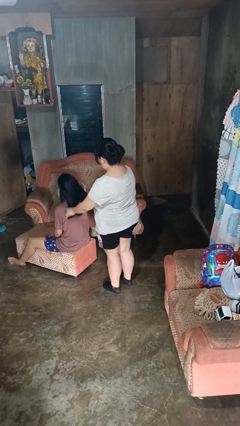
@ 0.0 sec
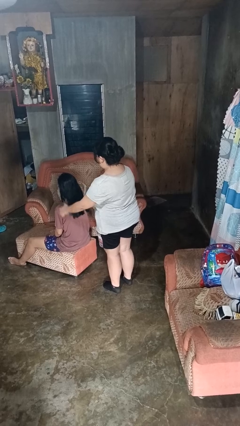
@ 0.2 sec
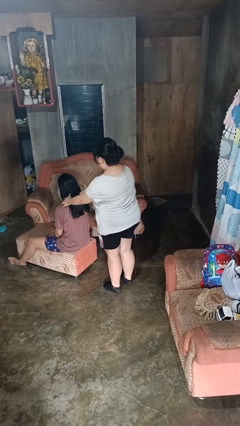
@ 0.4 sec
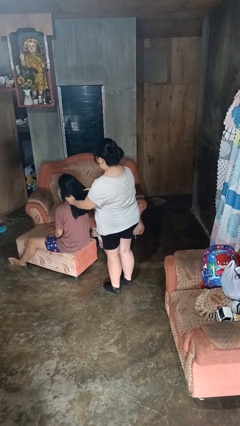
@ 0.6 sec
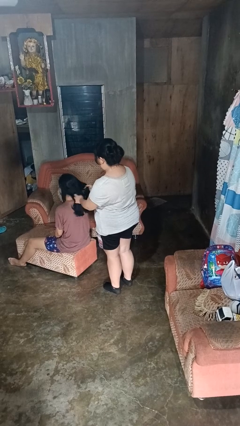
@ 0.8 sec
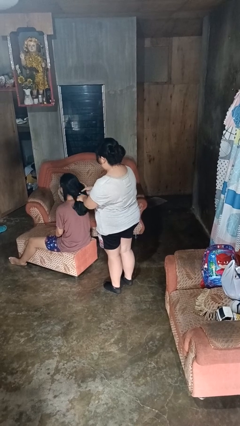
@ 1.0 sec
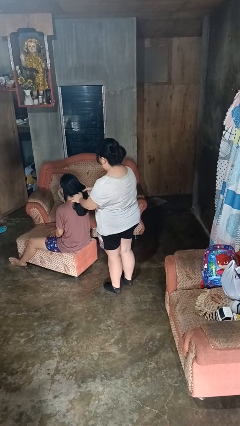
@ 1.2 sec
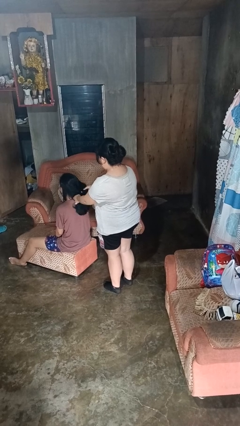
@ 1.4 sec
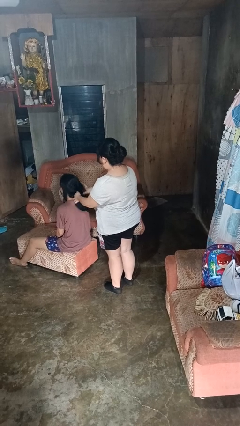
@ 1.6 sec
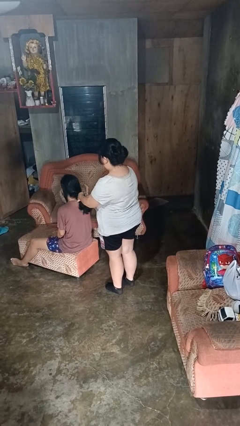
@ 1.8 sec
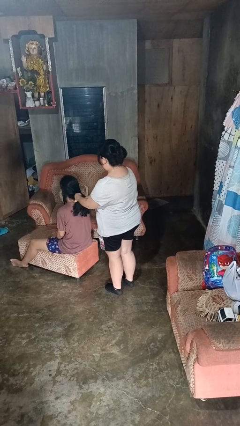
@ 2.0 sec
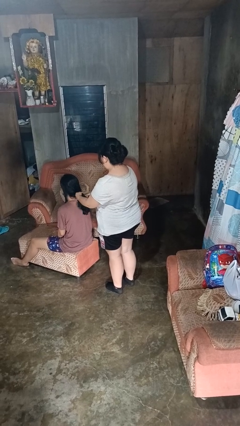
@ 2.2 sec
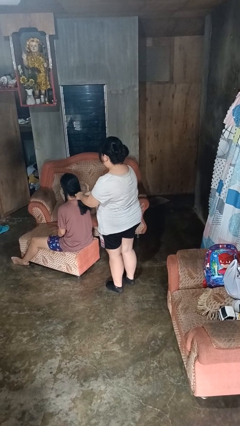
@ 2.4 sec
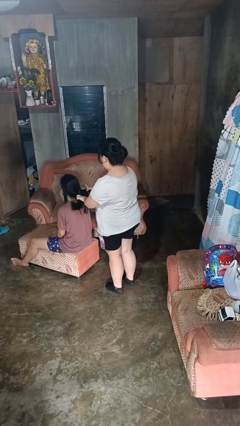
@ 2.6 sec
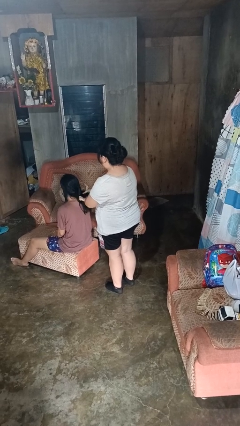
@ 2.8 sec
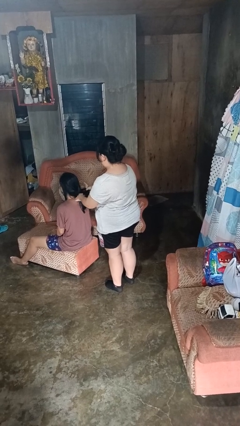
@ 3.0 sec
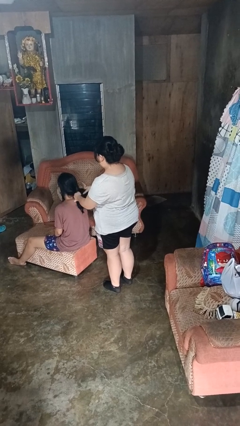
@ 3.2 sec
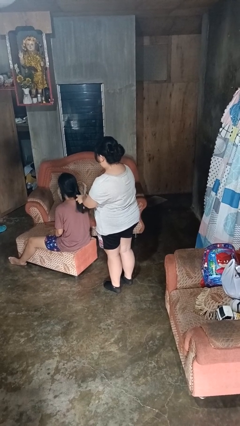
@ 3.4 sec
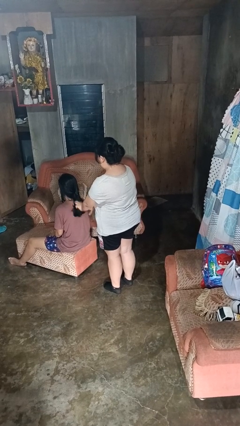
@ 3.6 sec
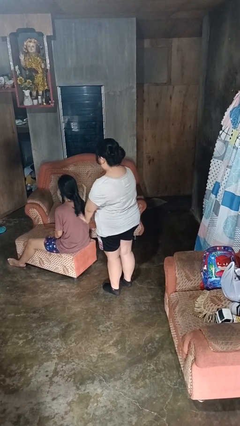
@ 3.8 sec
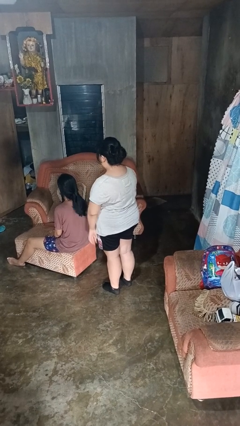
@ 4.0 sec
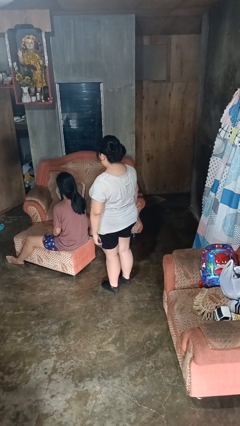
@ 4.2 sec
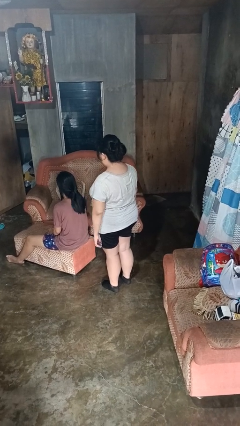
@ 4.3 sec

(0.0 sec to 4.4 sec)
person braids hair of person

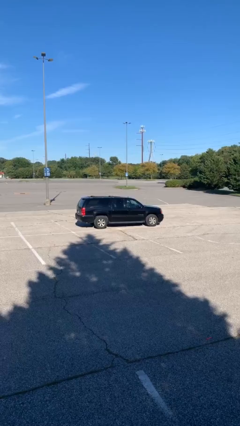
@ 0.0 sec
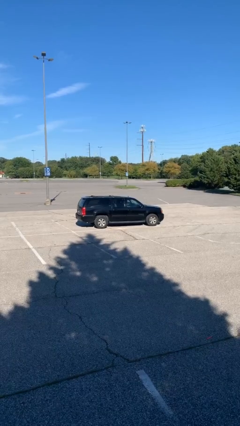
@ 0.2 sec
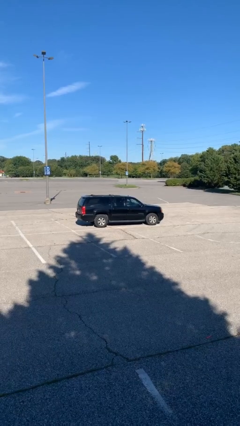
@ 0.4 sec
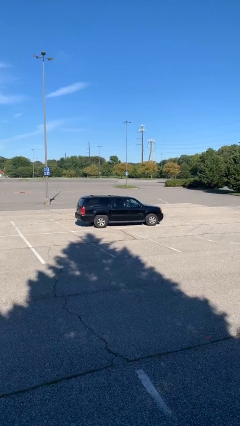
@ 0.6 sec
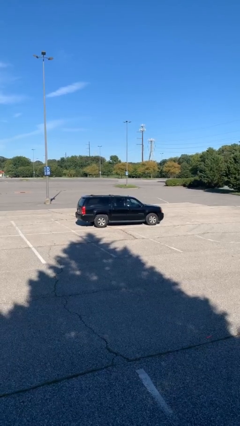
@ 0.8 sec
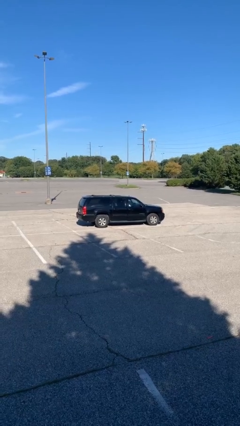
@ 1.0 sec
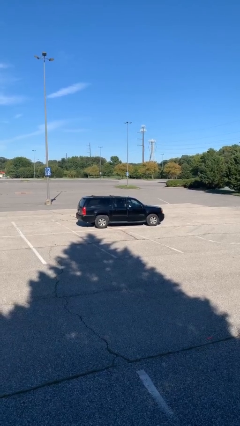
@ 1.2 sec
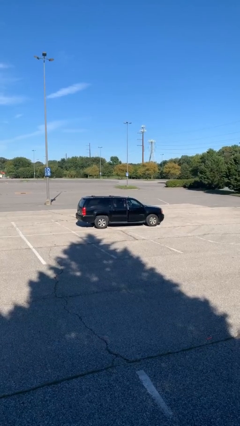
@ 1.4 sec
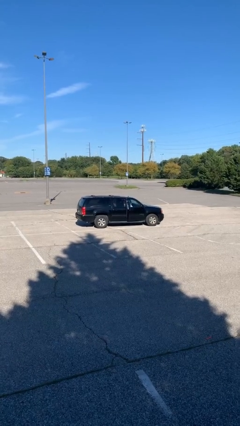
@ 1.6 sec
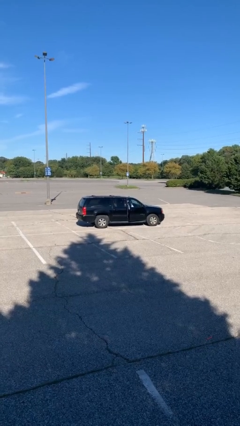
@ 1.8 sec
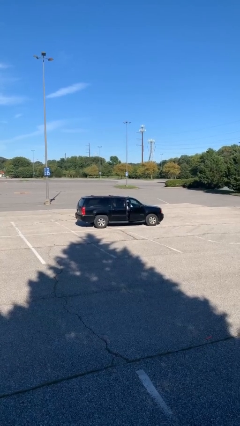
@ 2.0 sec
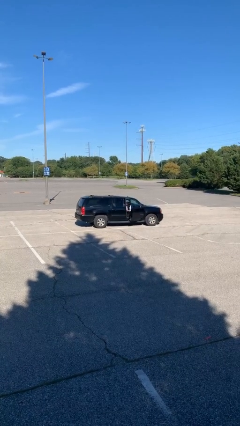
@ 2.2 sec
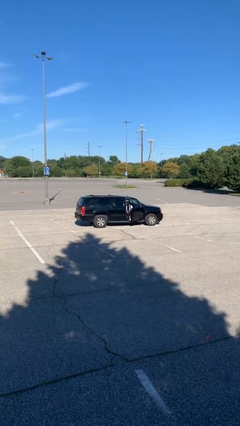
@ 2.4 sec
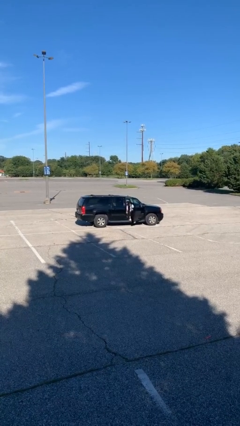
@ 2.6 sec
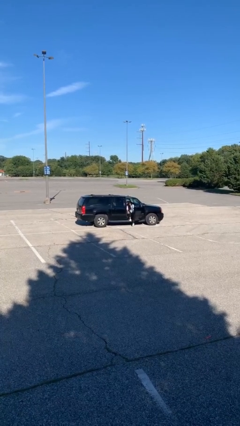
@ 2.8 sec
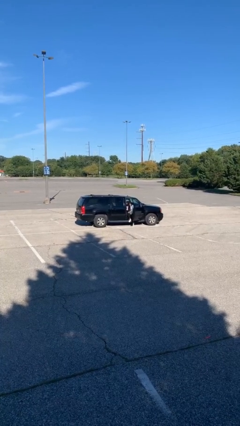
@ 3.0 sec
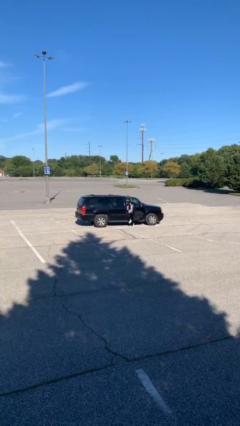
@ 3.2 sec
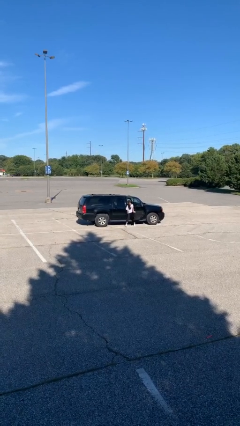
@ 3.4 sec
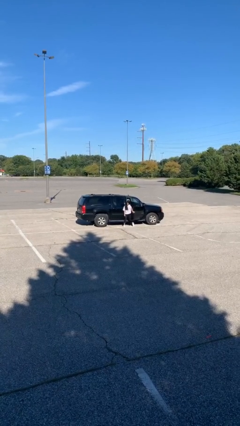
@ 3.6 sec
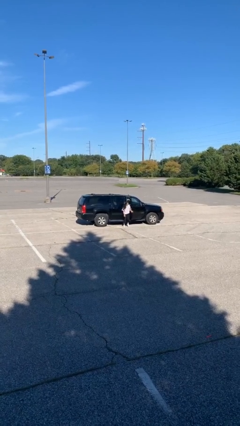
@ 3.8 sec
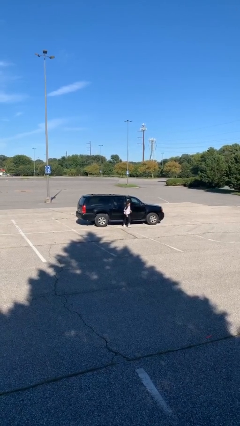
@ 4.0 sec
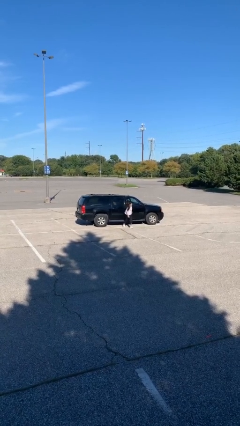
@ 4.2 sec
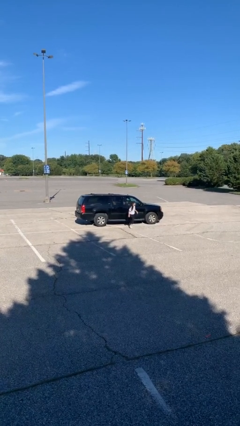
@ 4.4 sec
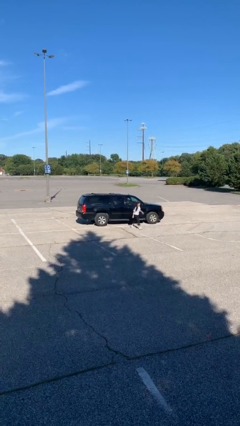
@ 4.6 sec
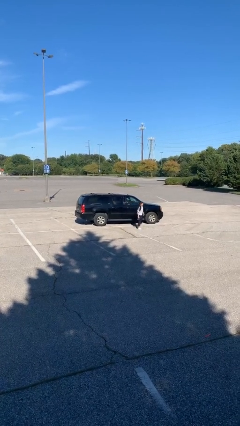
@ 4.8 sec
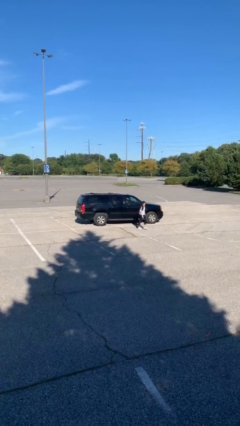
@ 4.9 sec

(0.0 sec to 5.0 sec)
car drops off person

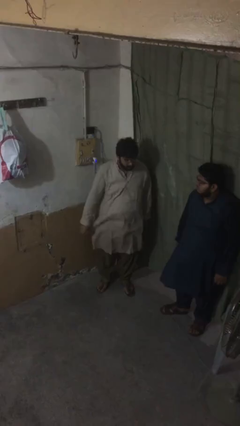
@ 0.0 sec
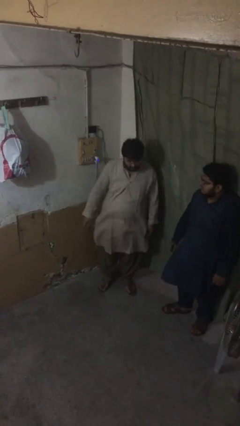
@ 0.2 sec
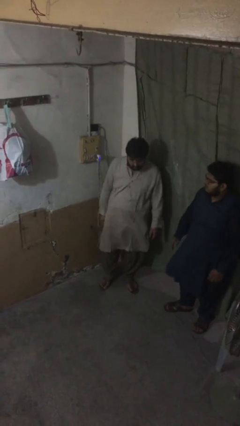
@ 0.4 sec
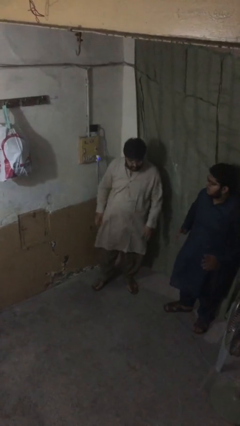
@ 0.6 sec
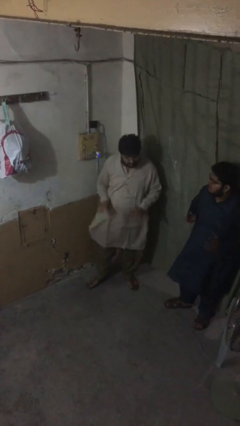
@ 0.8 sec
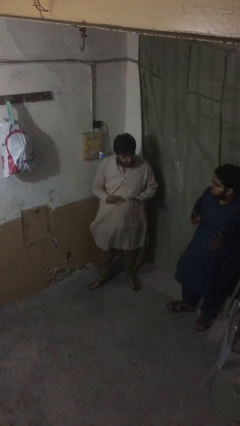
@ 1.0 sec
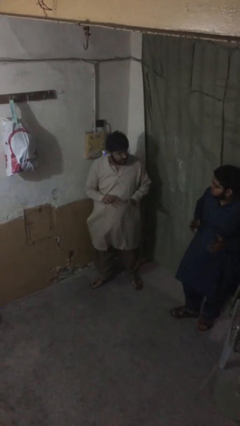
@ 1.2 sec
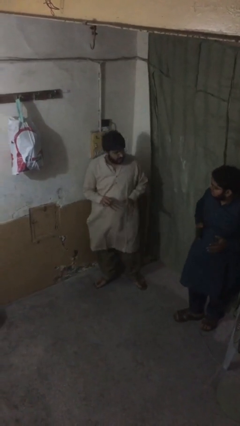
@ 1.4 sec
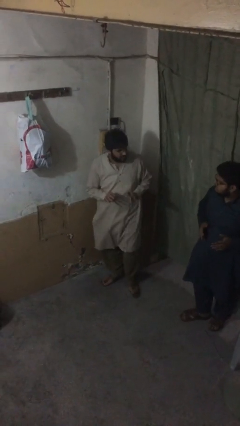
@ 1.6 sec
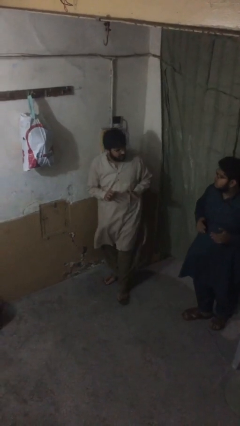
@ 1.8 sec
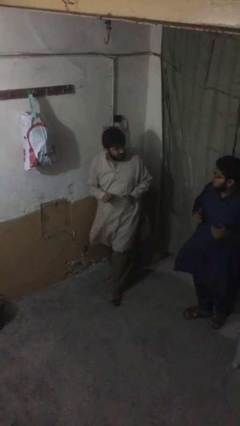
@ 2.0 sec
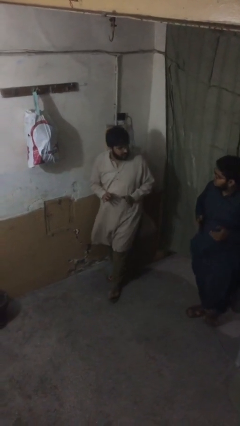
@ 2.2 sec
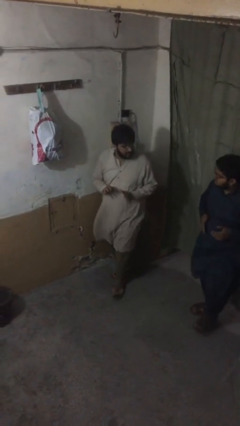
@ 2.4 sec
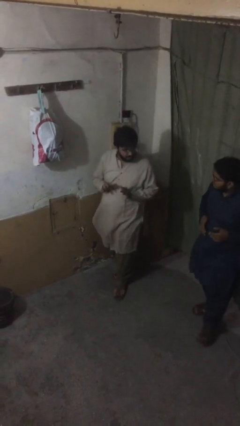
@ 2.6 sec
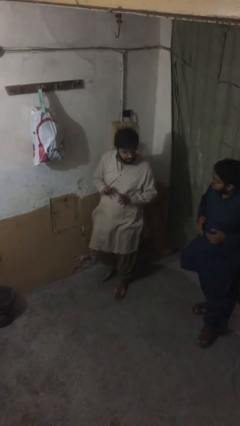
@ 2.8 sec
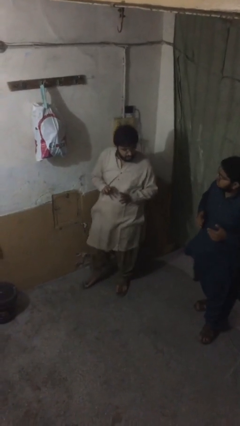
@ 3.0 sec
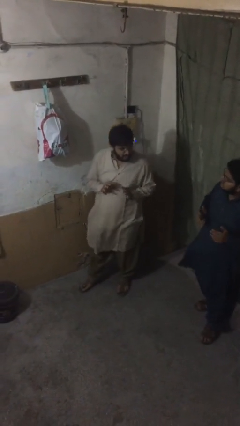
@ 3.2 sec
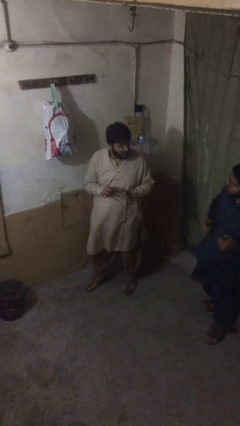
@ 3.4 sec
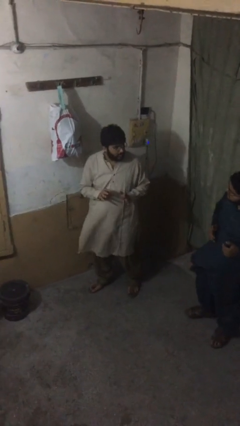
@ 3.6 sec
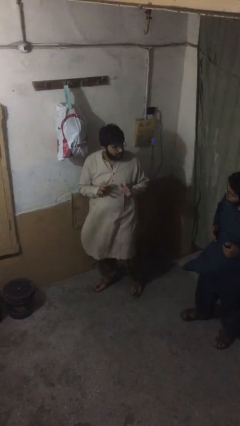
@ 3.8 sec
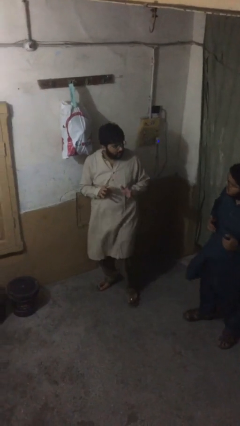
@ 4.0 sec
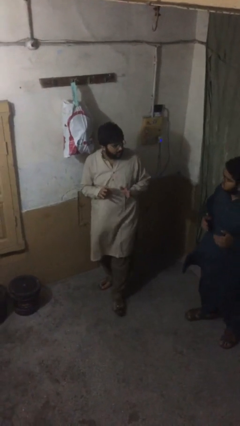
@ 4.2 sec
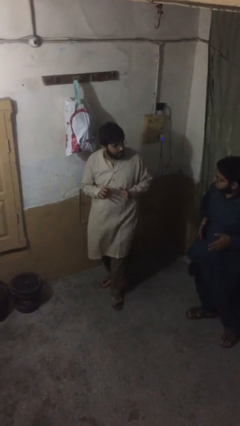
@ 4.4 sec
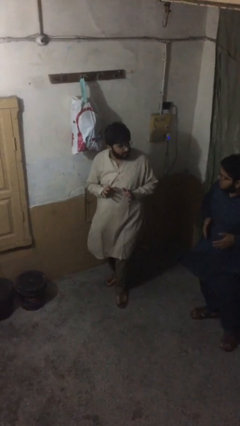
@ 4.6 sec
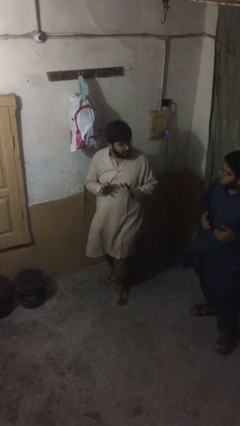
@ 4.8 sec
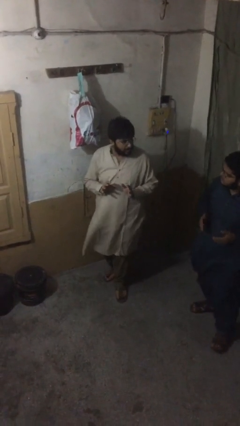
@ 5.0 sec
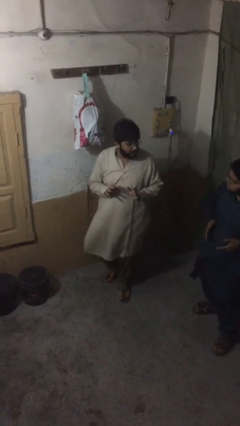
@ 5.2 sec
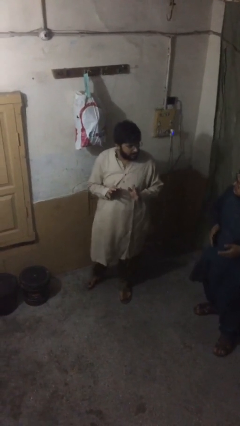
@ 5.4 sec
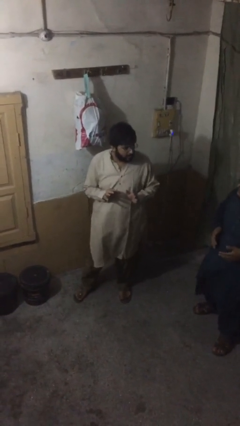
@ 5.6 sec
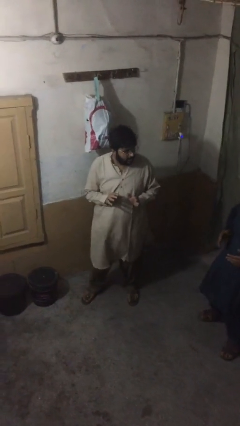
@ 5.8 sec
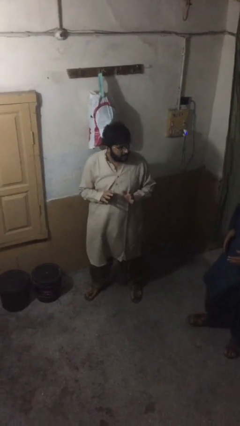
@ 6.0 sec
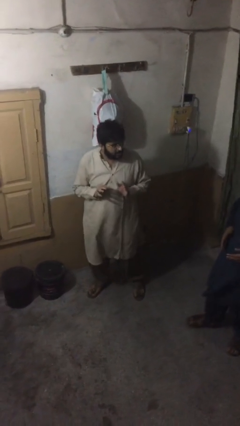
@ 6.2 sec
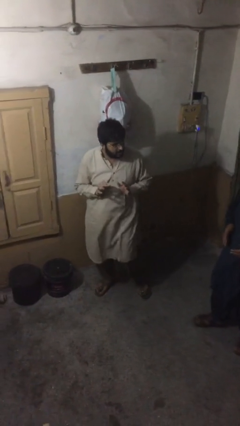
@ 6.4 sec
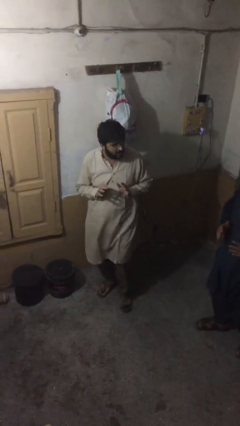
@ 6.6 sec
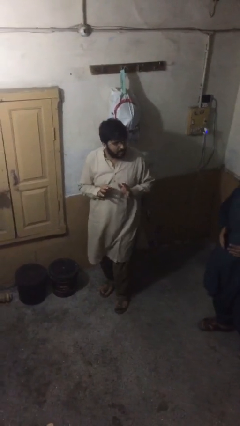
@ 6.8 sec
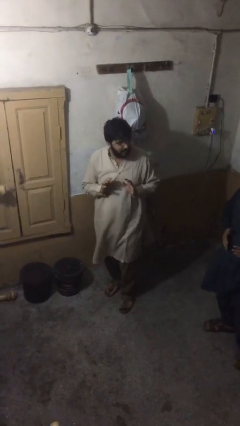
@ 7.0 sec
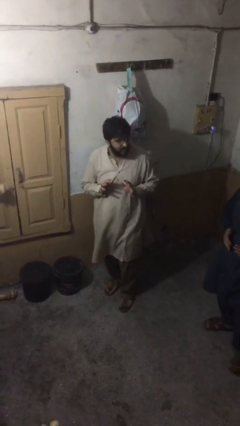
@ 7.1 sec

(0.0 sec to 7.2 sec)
person talks to person

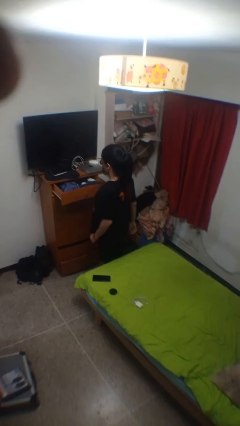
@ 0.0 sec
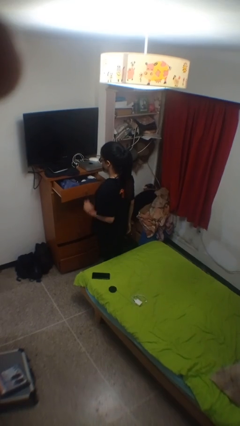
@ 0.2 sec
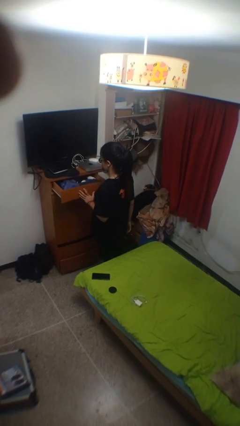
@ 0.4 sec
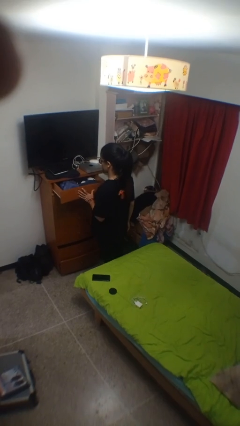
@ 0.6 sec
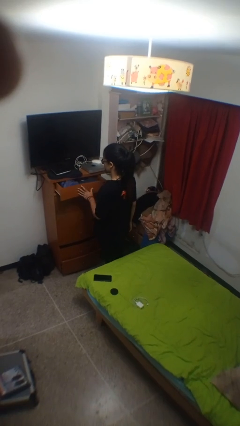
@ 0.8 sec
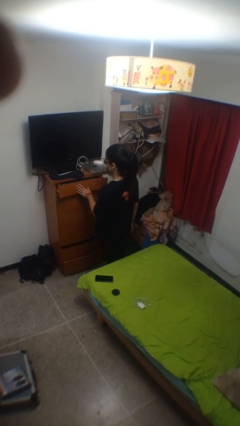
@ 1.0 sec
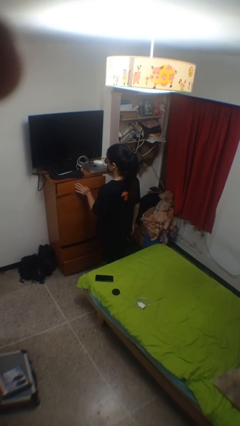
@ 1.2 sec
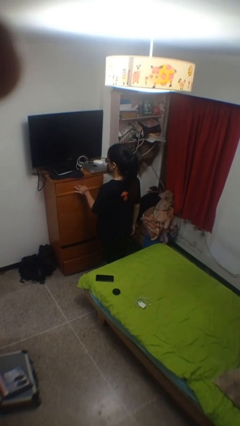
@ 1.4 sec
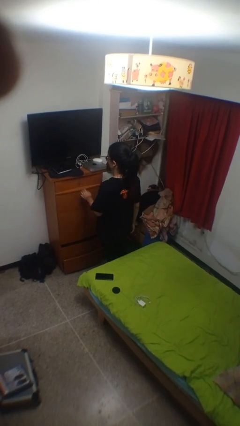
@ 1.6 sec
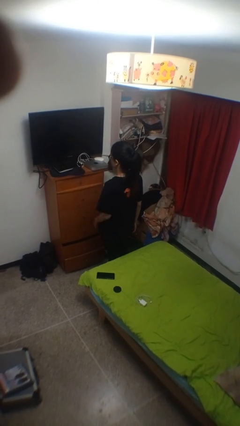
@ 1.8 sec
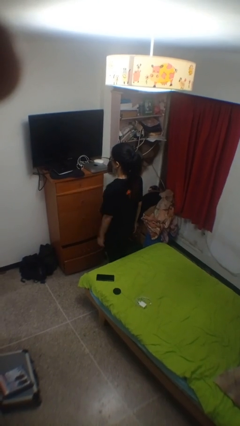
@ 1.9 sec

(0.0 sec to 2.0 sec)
person closes dresser drawer
